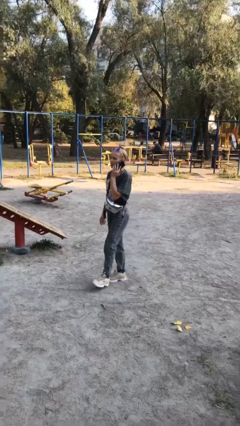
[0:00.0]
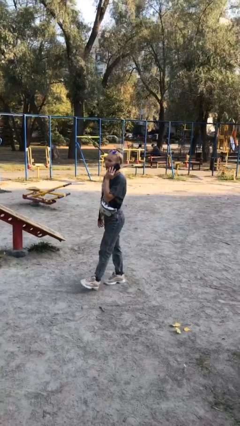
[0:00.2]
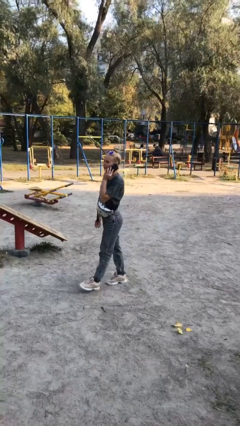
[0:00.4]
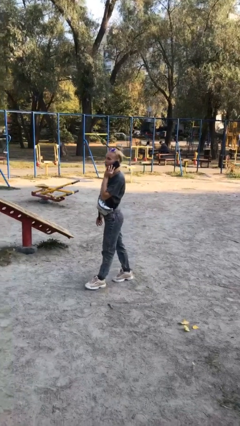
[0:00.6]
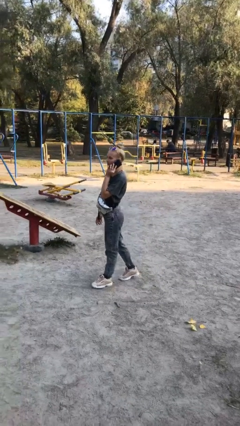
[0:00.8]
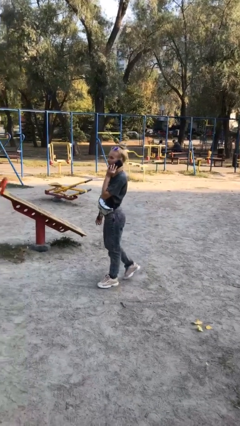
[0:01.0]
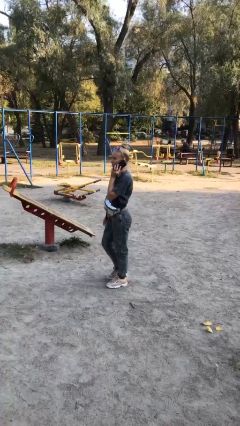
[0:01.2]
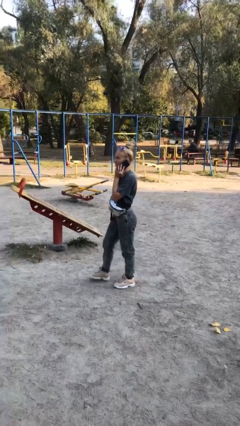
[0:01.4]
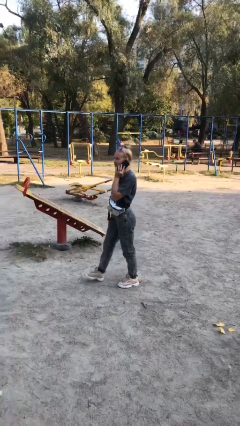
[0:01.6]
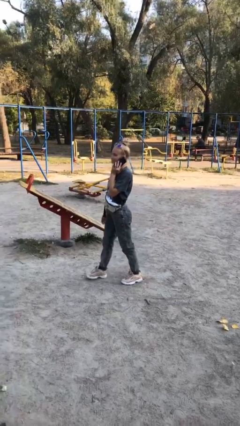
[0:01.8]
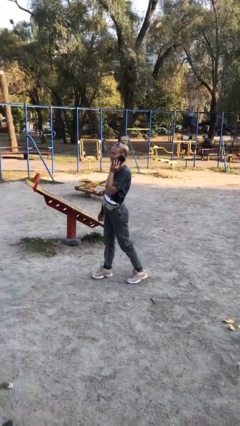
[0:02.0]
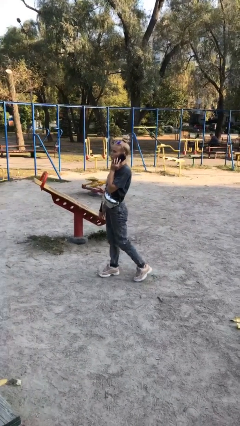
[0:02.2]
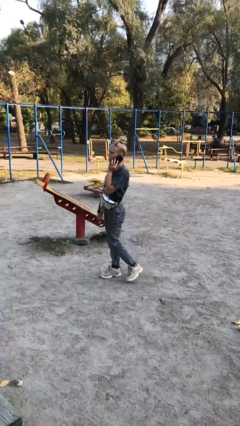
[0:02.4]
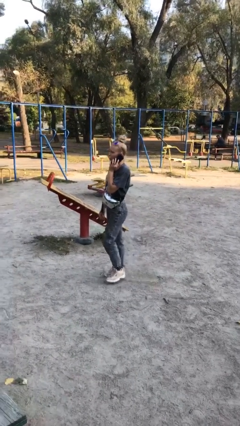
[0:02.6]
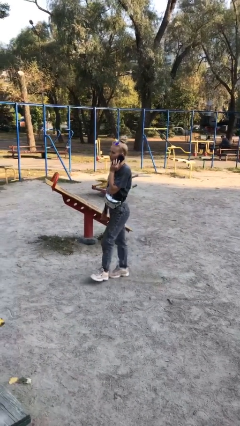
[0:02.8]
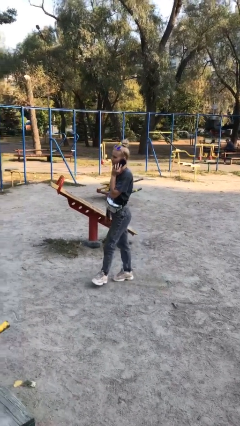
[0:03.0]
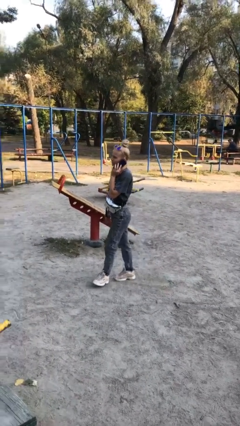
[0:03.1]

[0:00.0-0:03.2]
person talks on phone

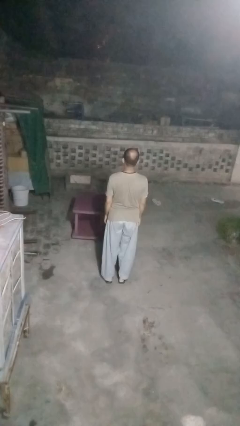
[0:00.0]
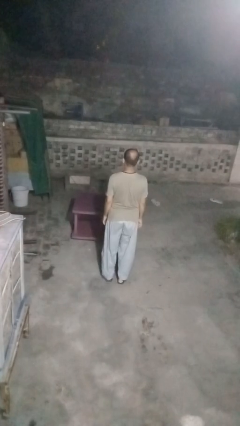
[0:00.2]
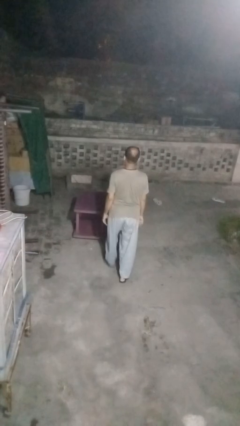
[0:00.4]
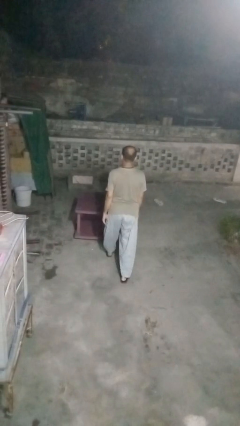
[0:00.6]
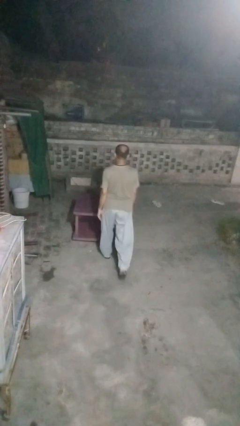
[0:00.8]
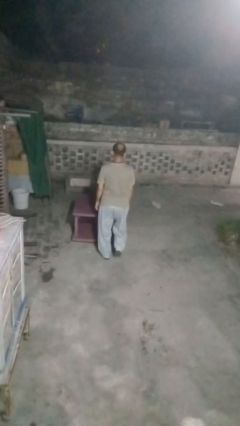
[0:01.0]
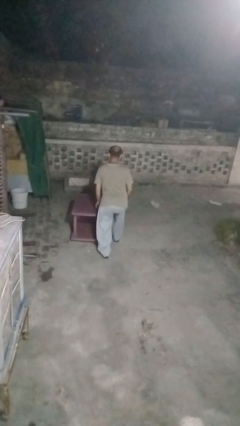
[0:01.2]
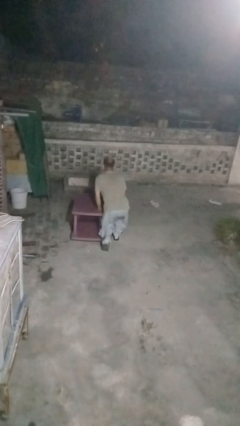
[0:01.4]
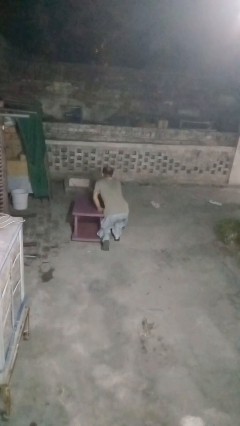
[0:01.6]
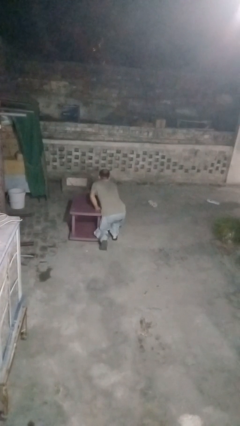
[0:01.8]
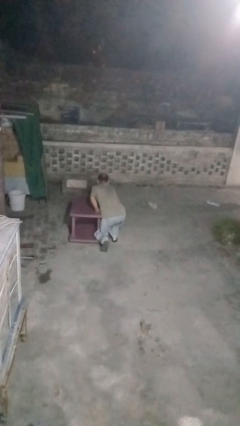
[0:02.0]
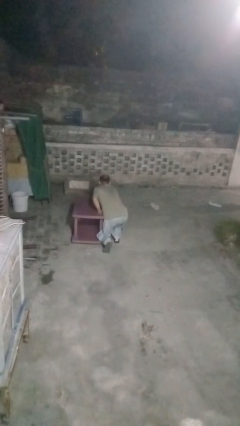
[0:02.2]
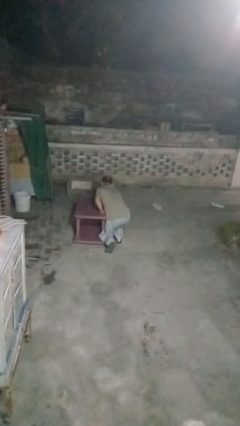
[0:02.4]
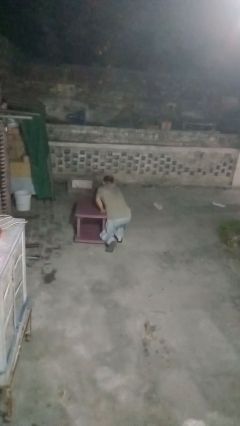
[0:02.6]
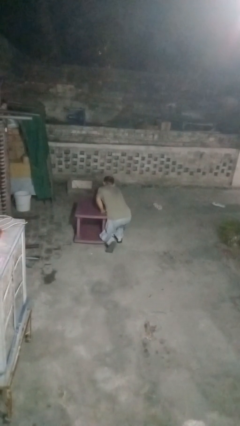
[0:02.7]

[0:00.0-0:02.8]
person bumps into table

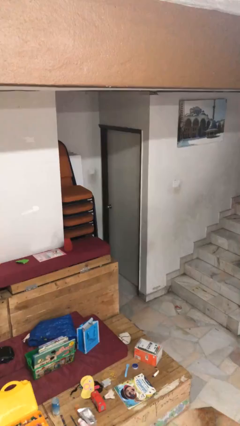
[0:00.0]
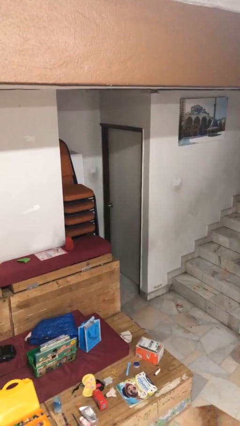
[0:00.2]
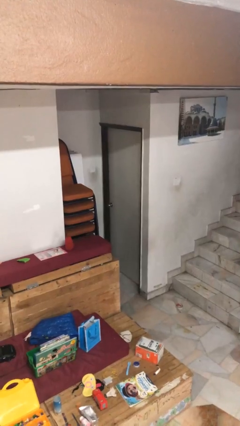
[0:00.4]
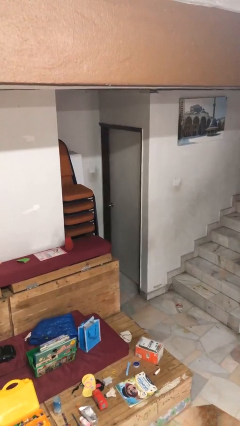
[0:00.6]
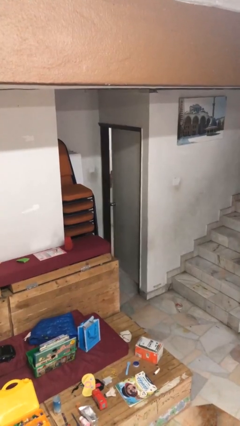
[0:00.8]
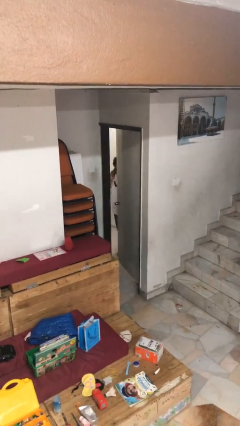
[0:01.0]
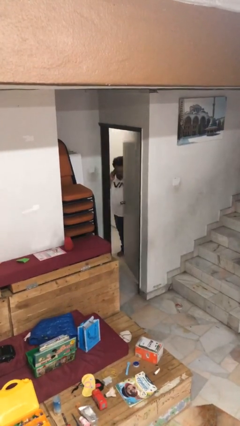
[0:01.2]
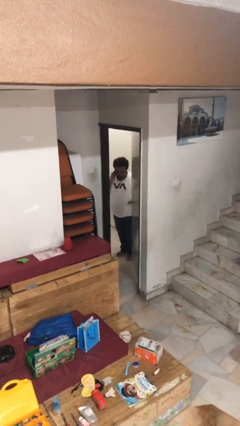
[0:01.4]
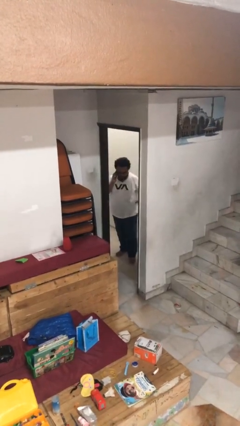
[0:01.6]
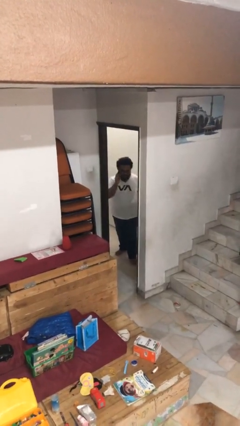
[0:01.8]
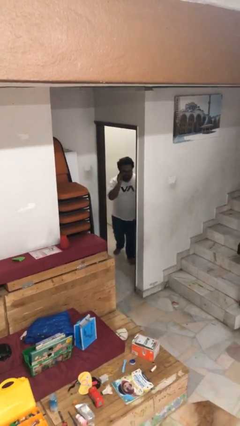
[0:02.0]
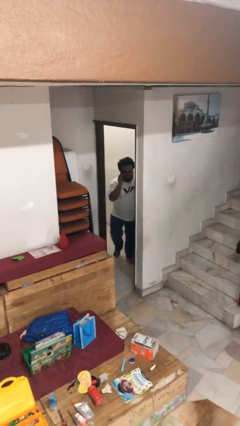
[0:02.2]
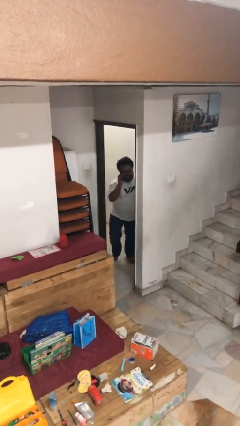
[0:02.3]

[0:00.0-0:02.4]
person opens facility door

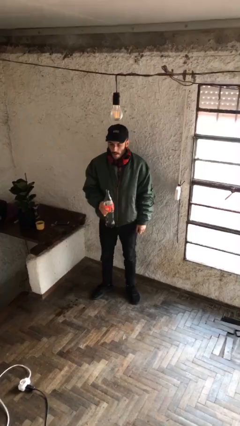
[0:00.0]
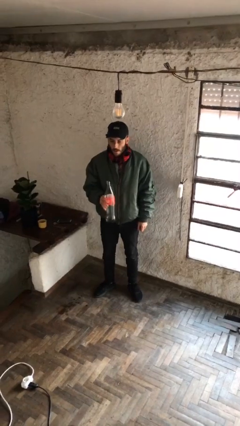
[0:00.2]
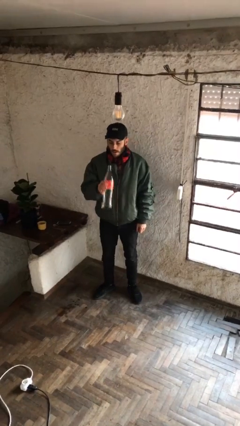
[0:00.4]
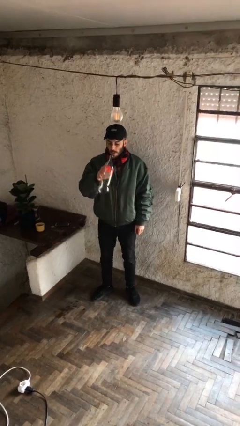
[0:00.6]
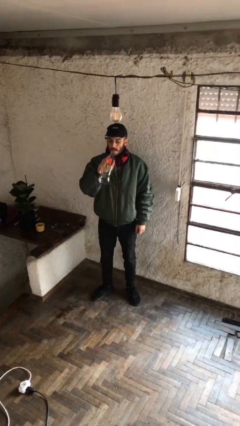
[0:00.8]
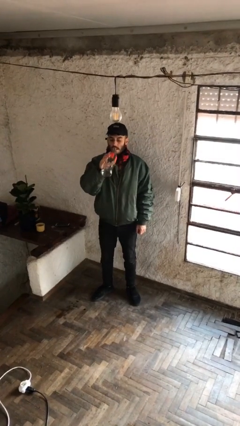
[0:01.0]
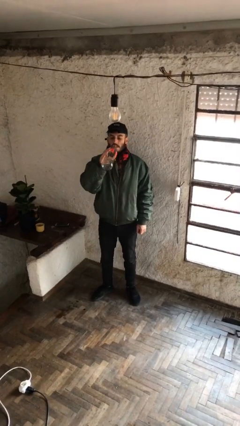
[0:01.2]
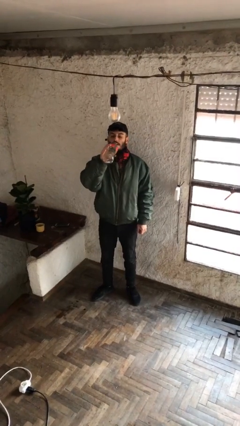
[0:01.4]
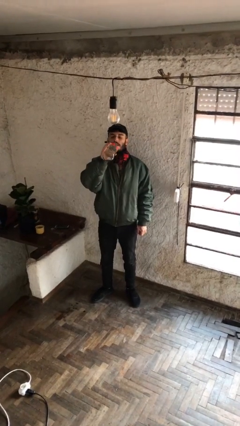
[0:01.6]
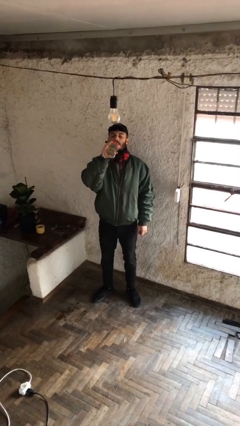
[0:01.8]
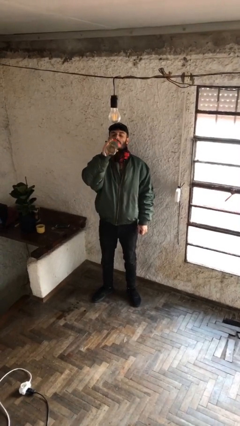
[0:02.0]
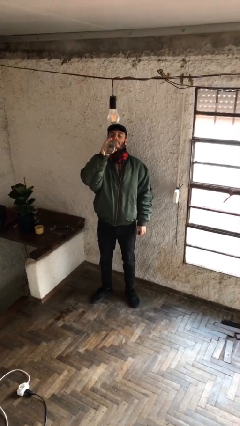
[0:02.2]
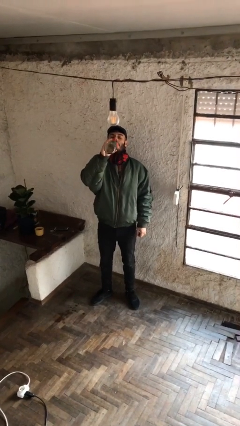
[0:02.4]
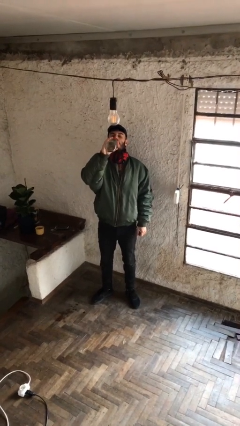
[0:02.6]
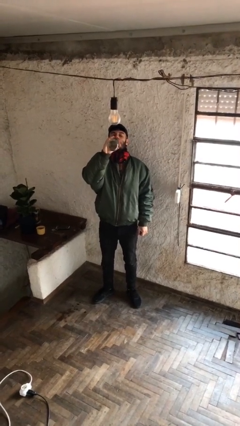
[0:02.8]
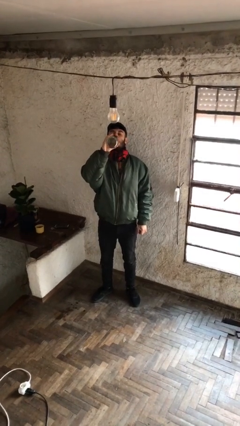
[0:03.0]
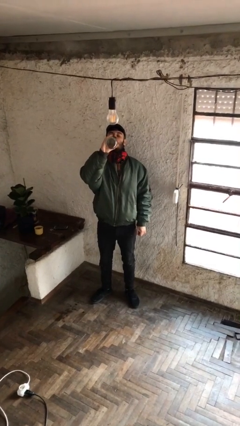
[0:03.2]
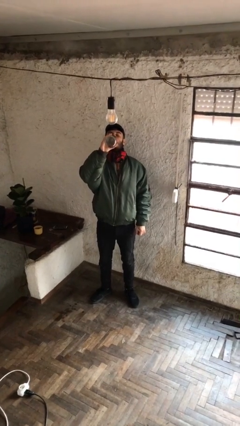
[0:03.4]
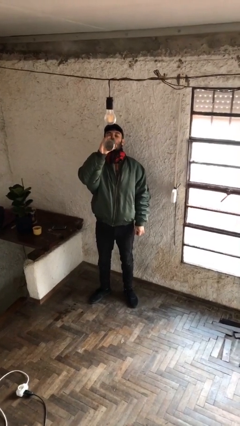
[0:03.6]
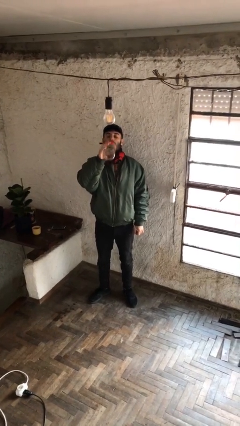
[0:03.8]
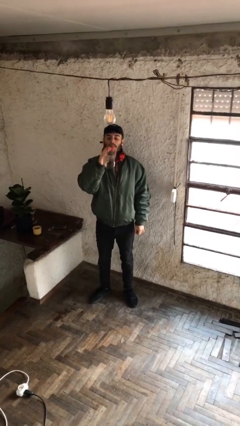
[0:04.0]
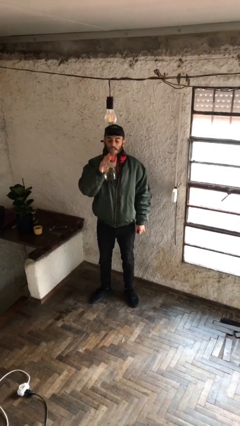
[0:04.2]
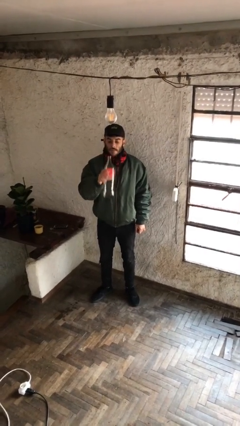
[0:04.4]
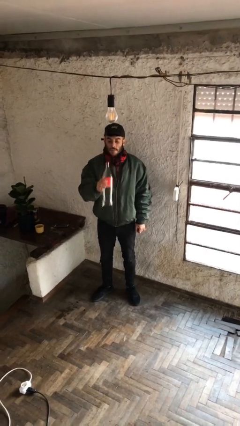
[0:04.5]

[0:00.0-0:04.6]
person drinks from bottle

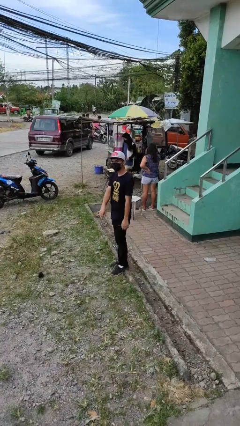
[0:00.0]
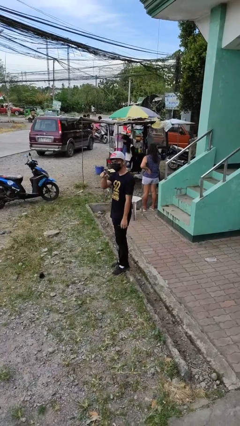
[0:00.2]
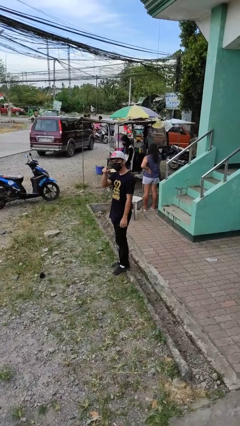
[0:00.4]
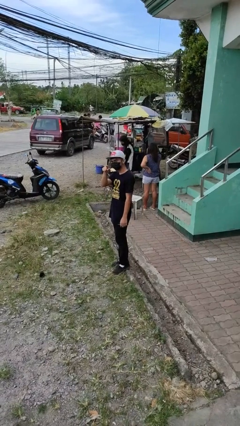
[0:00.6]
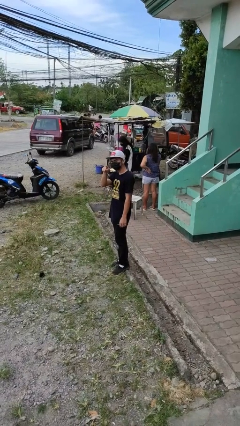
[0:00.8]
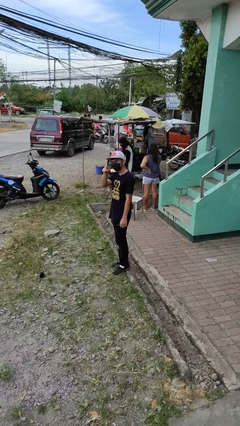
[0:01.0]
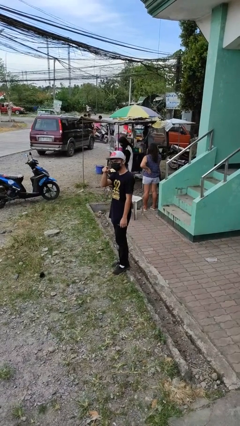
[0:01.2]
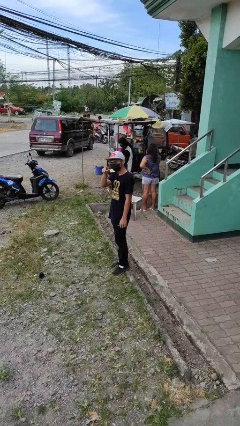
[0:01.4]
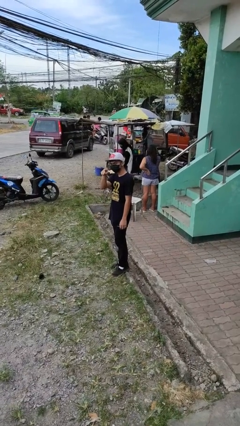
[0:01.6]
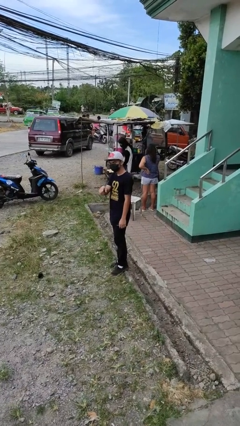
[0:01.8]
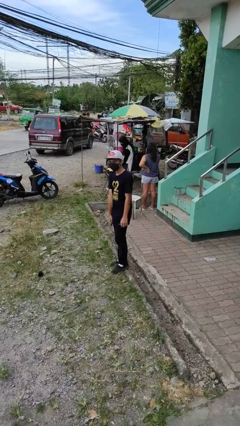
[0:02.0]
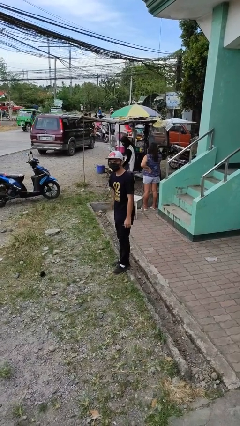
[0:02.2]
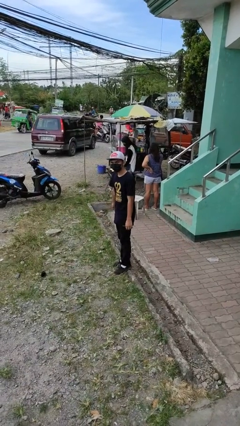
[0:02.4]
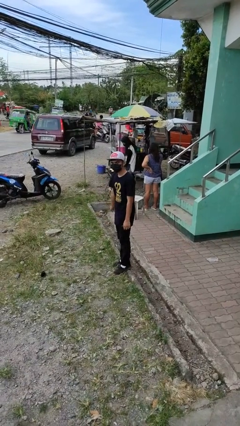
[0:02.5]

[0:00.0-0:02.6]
person points at person

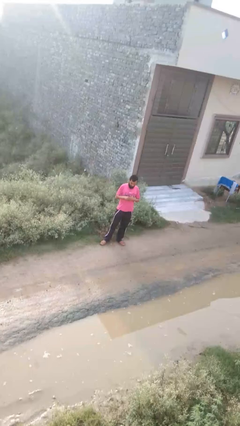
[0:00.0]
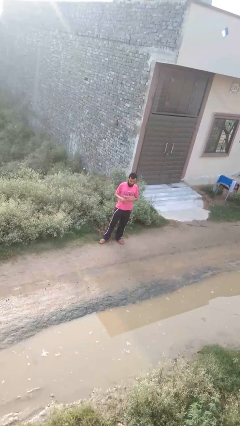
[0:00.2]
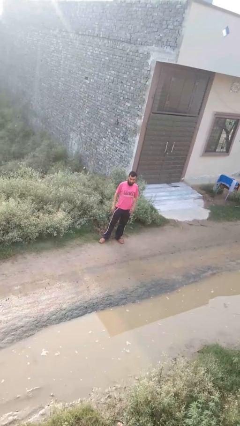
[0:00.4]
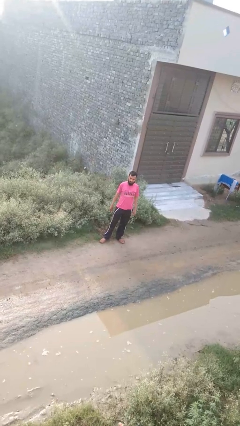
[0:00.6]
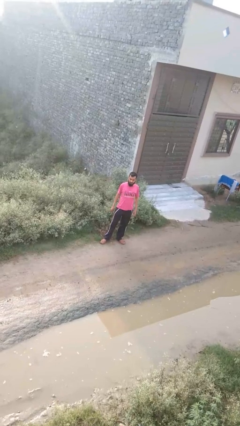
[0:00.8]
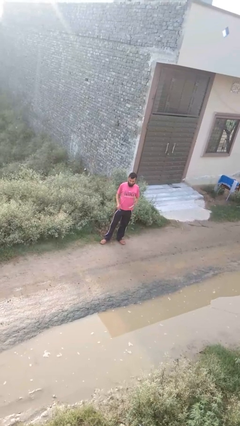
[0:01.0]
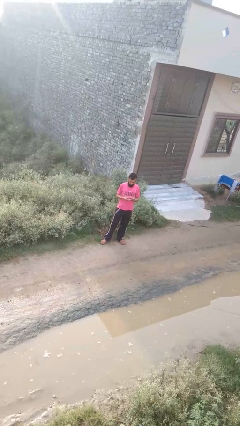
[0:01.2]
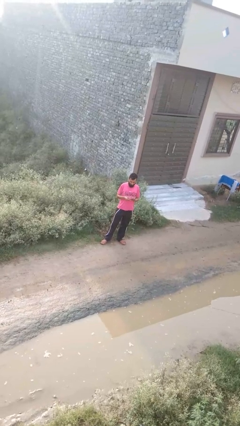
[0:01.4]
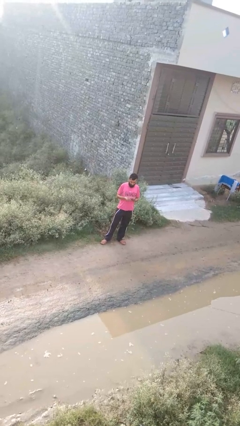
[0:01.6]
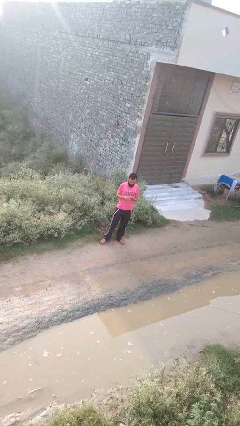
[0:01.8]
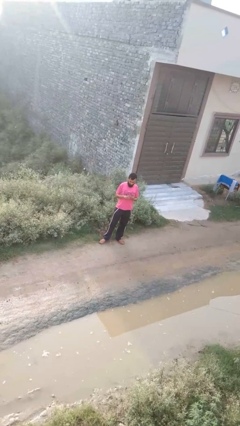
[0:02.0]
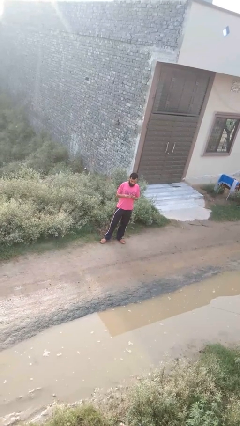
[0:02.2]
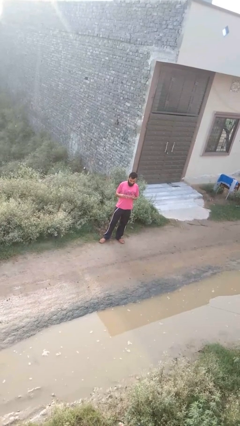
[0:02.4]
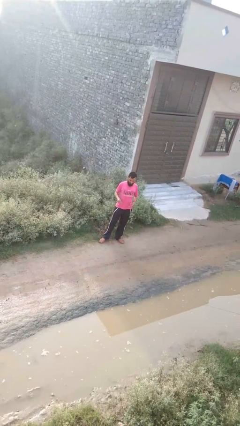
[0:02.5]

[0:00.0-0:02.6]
person takes off ring
